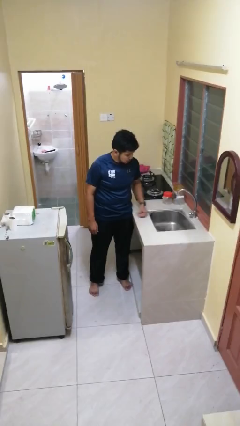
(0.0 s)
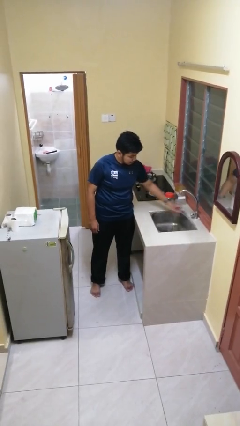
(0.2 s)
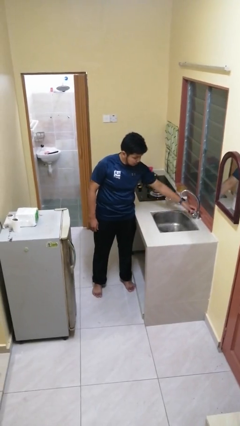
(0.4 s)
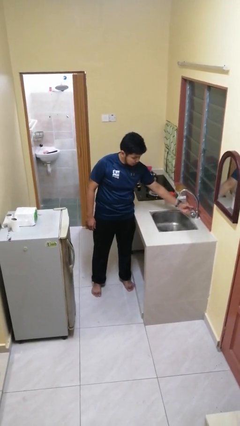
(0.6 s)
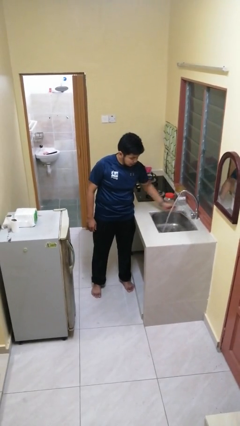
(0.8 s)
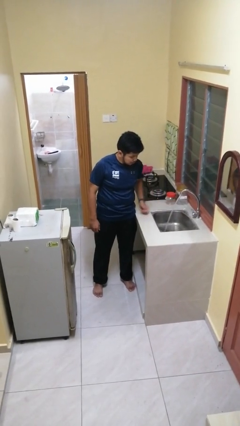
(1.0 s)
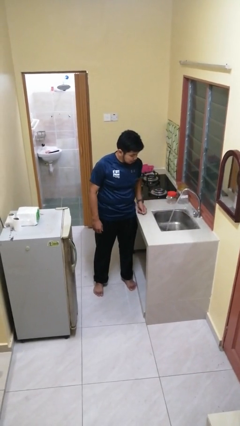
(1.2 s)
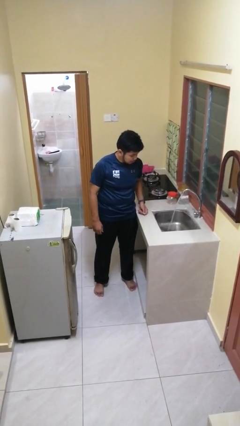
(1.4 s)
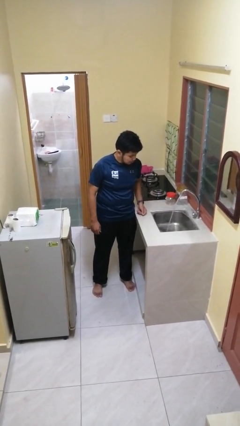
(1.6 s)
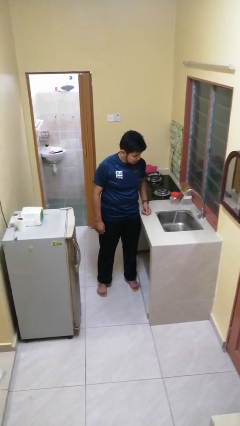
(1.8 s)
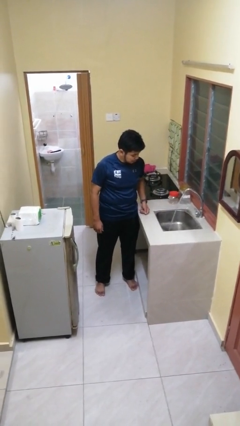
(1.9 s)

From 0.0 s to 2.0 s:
person turns on faucet

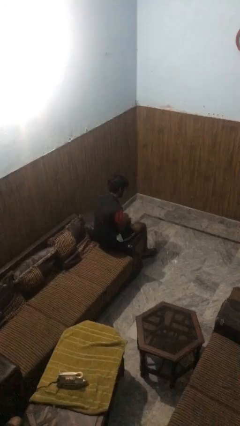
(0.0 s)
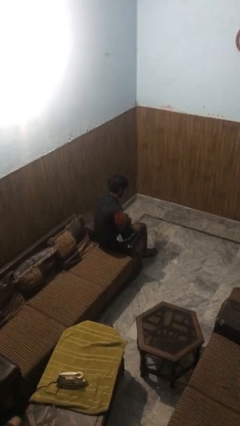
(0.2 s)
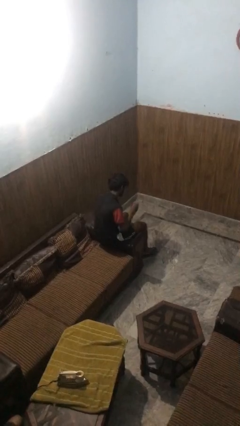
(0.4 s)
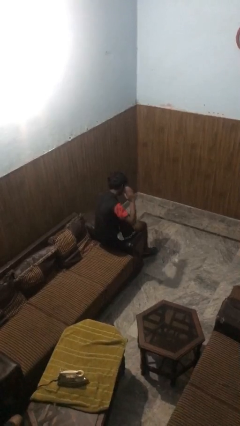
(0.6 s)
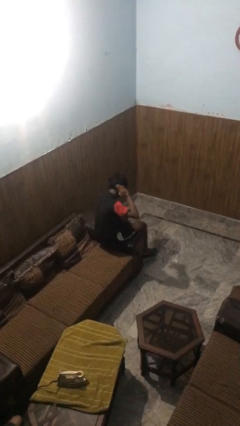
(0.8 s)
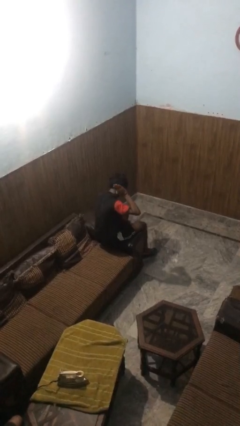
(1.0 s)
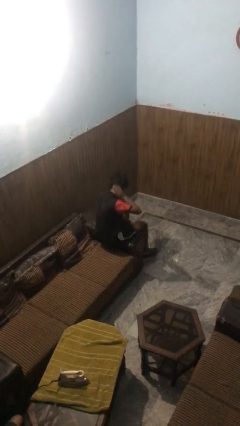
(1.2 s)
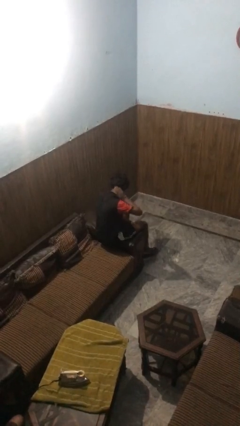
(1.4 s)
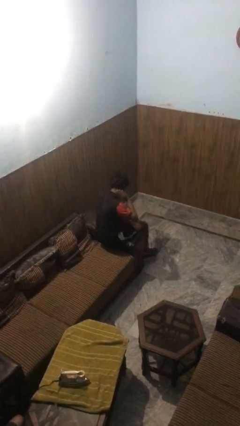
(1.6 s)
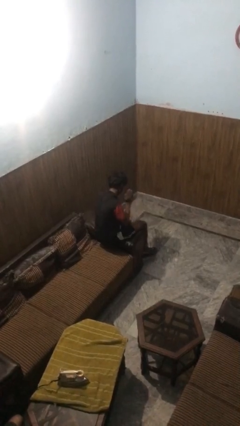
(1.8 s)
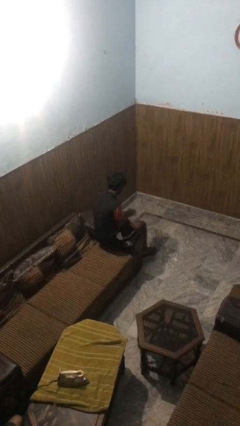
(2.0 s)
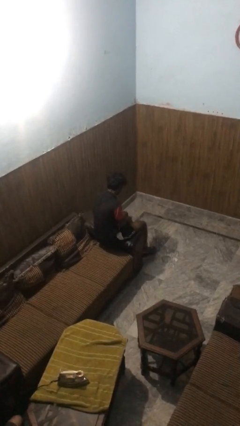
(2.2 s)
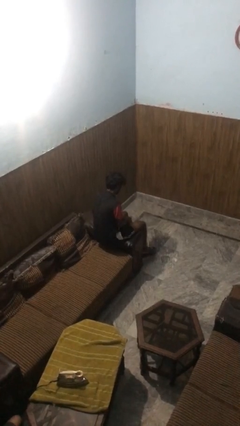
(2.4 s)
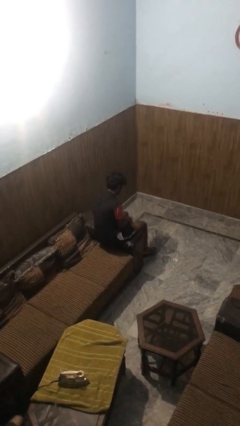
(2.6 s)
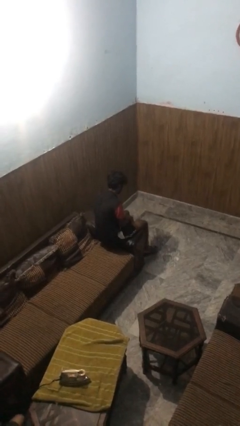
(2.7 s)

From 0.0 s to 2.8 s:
person swats bug

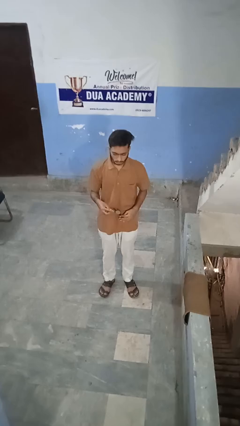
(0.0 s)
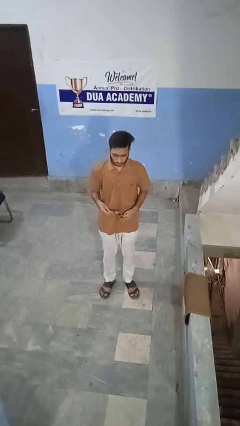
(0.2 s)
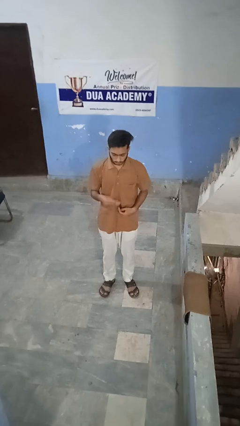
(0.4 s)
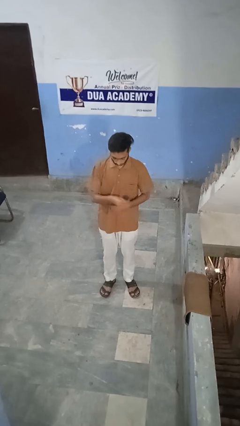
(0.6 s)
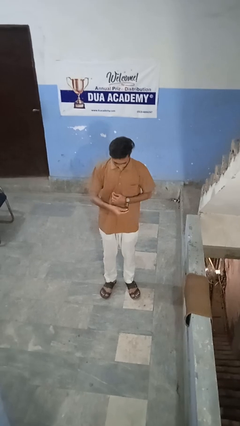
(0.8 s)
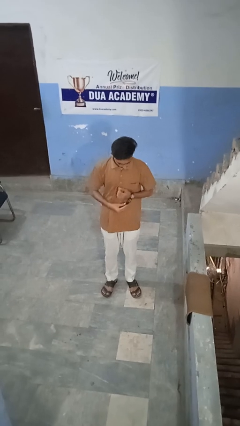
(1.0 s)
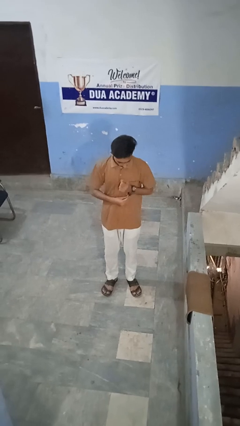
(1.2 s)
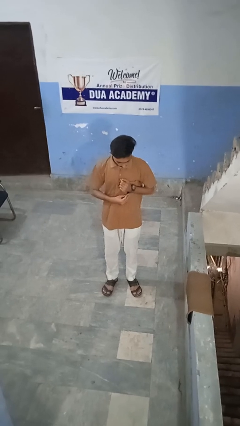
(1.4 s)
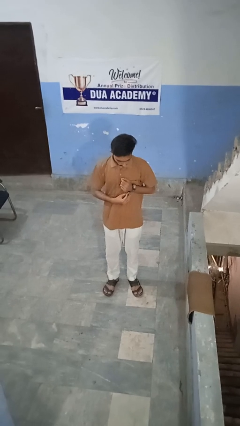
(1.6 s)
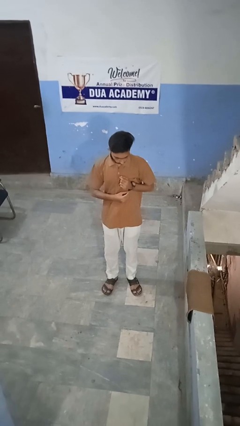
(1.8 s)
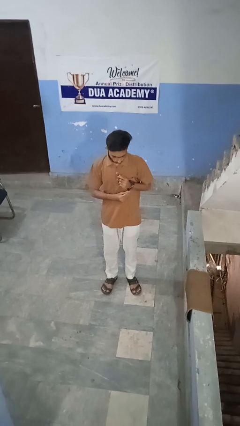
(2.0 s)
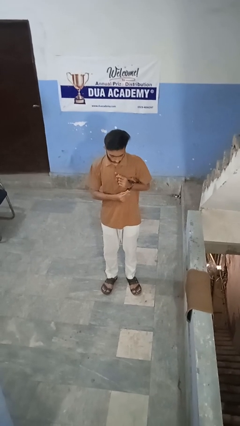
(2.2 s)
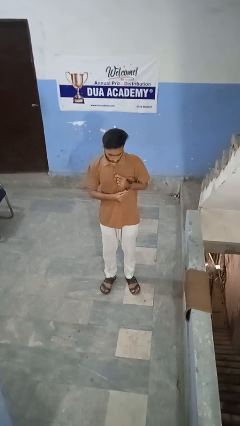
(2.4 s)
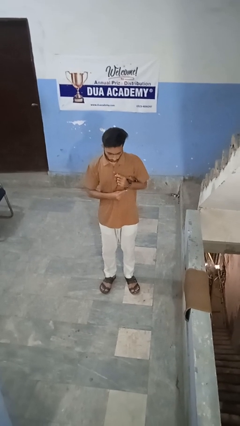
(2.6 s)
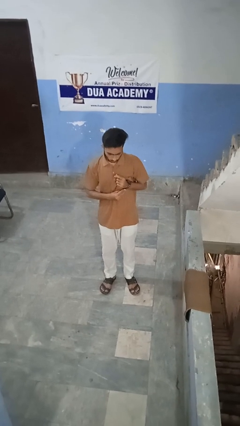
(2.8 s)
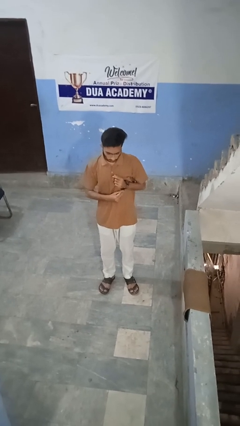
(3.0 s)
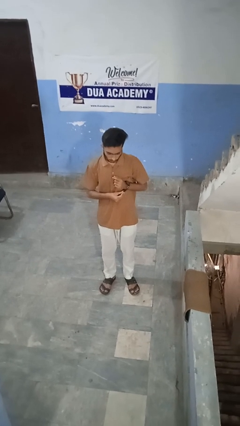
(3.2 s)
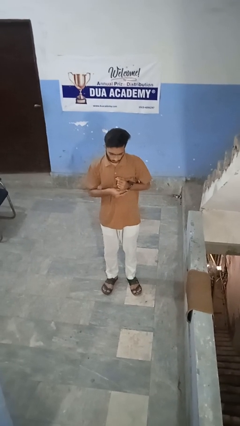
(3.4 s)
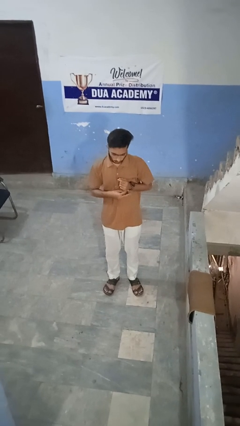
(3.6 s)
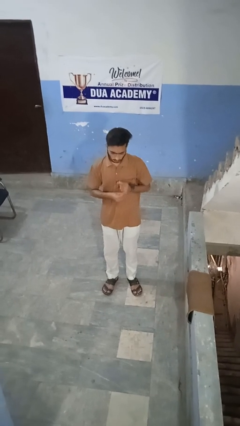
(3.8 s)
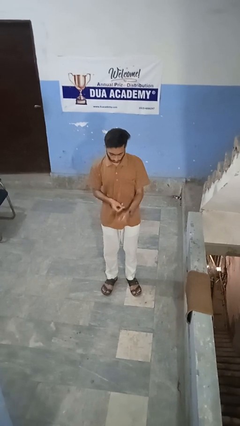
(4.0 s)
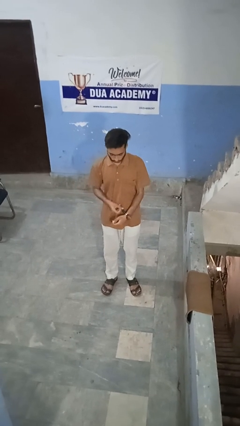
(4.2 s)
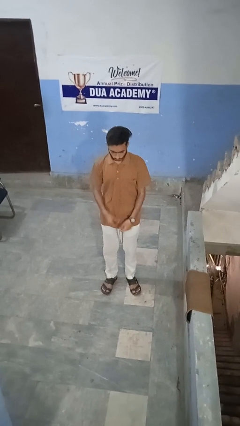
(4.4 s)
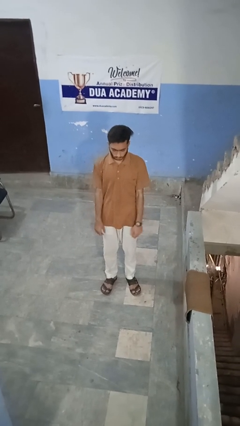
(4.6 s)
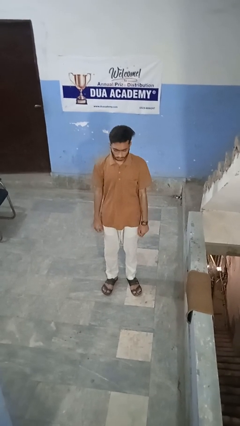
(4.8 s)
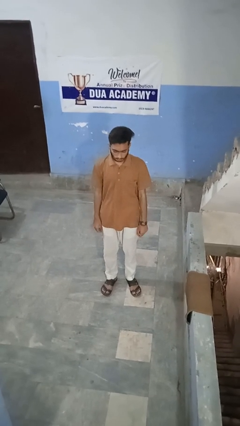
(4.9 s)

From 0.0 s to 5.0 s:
person puts on wristwatch

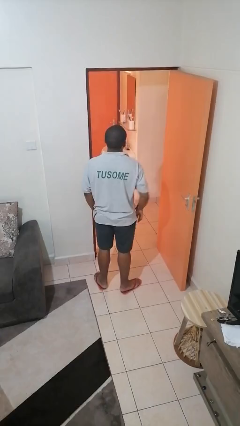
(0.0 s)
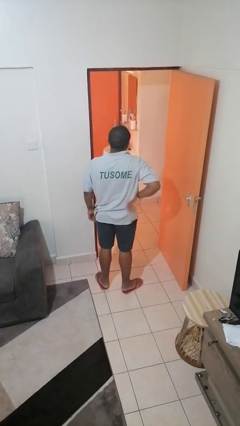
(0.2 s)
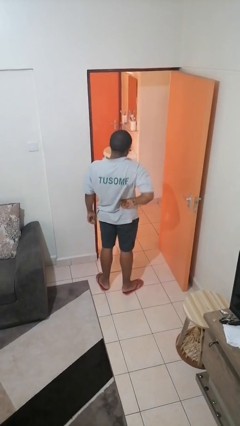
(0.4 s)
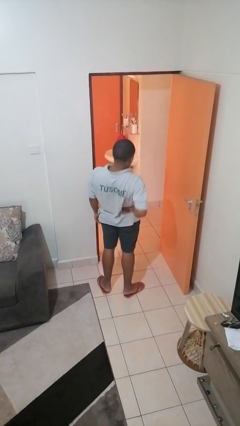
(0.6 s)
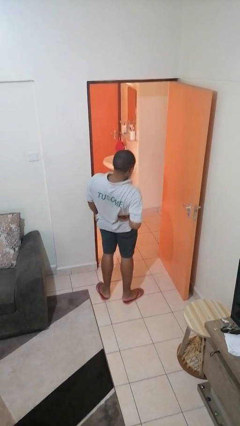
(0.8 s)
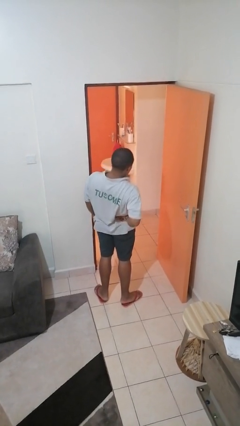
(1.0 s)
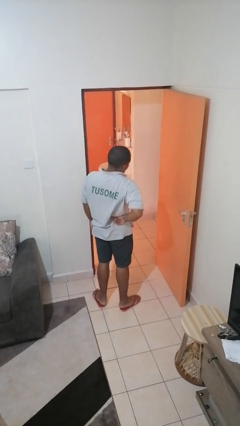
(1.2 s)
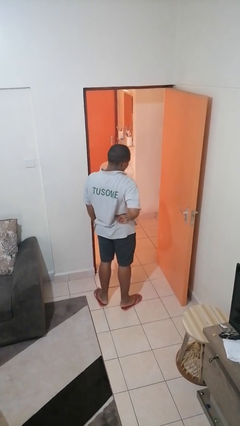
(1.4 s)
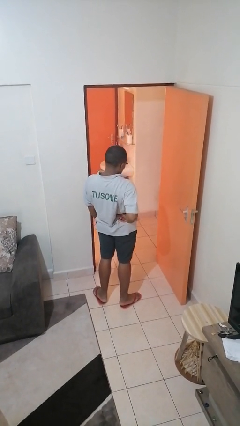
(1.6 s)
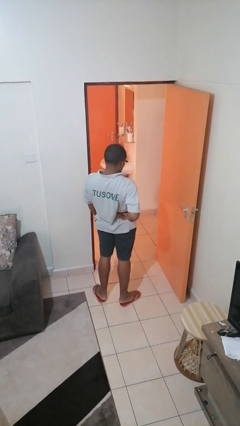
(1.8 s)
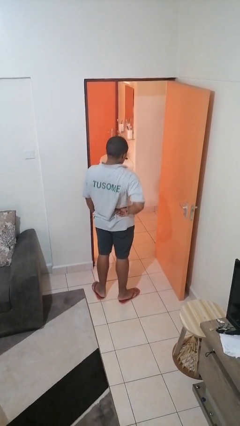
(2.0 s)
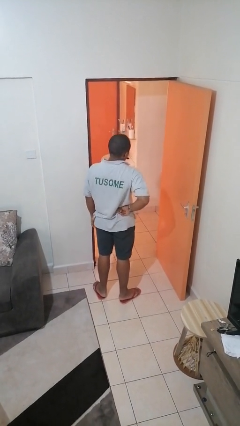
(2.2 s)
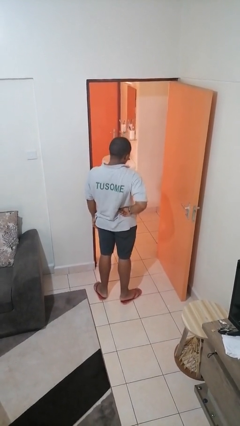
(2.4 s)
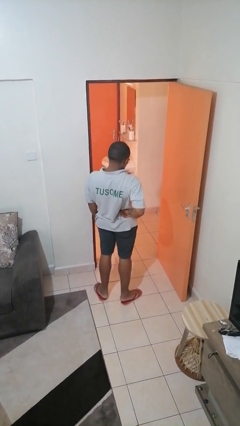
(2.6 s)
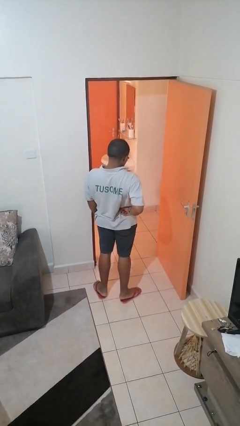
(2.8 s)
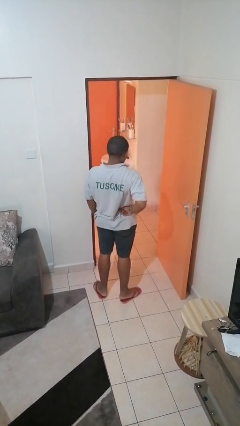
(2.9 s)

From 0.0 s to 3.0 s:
person stretches back

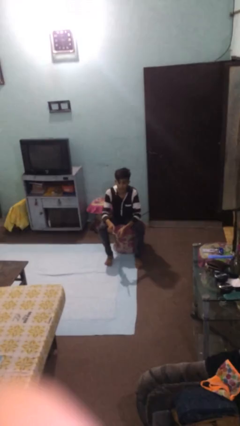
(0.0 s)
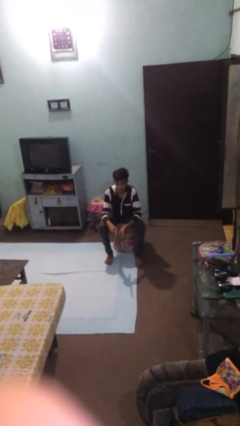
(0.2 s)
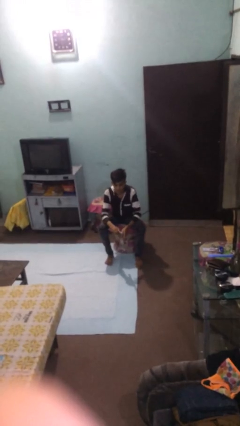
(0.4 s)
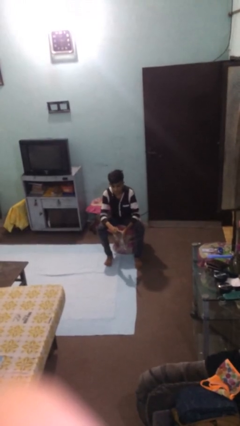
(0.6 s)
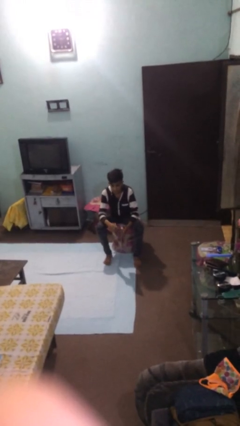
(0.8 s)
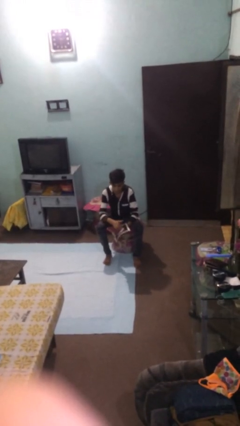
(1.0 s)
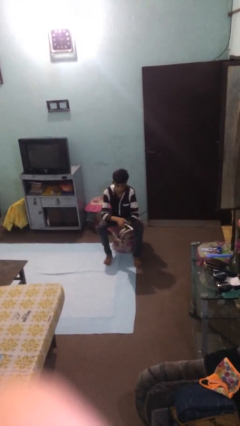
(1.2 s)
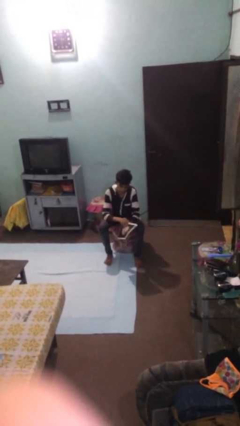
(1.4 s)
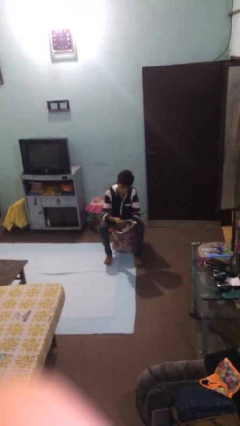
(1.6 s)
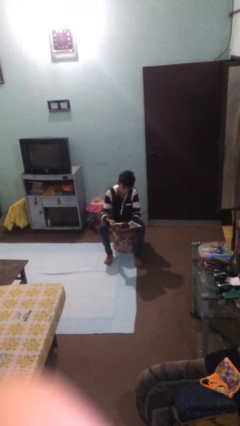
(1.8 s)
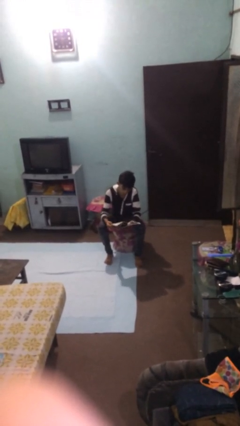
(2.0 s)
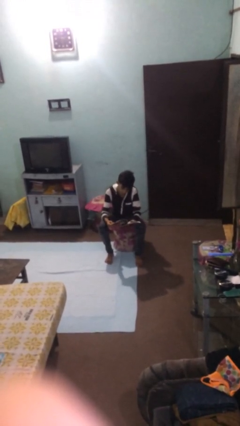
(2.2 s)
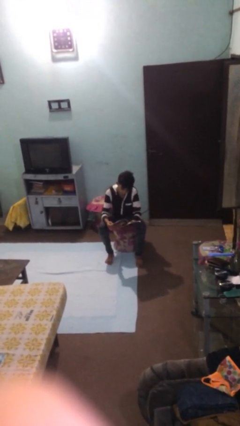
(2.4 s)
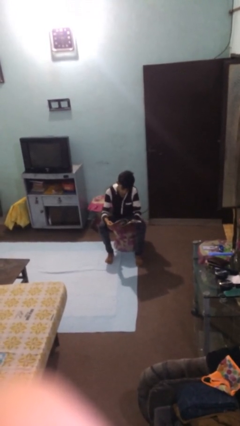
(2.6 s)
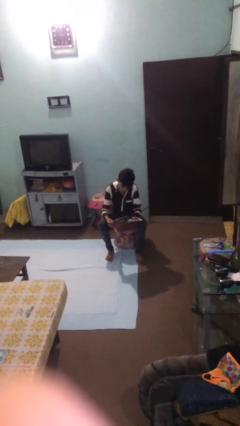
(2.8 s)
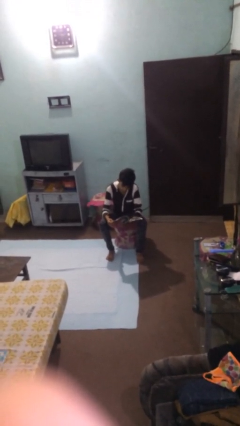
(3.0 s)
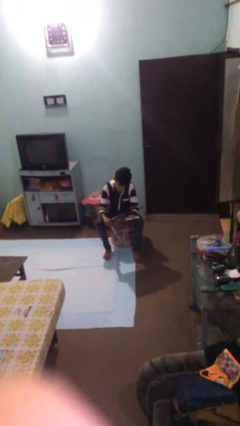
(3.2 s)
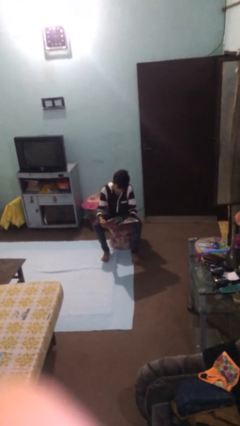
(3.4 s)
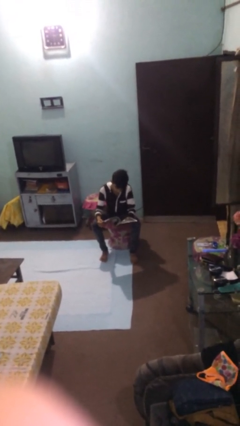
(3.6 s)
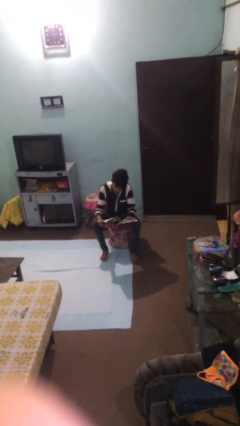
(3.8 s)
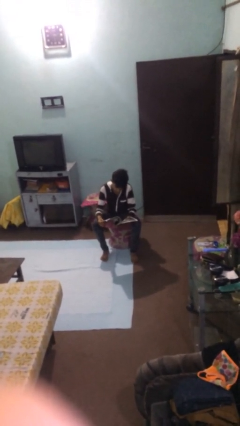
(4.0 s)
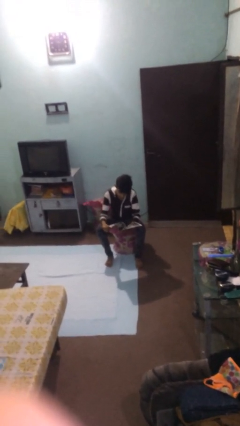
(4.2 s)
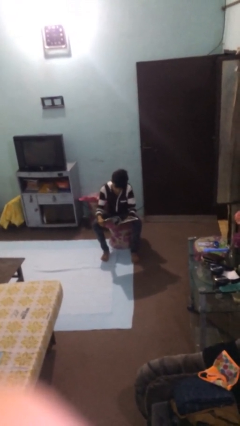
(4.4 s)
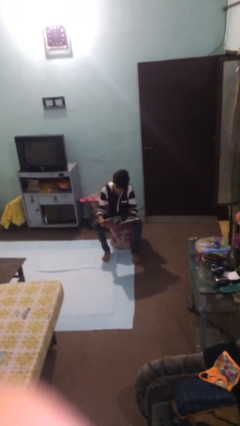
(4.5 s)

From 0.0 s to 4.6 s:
person reads document
